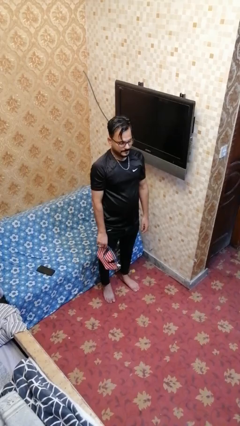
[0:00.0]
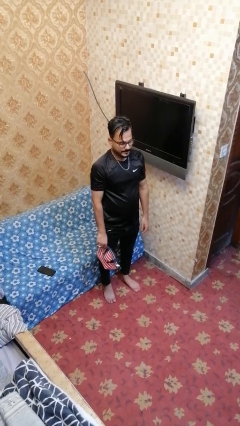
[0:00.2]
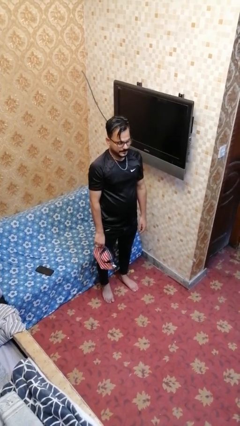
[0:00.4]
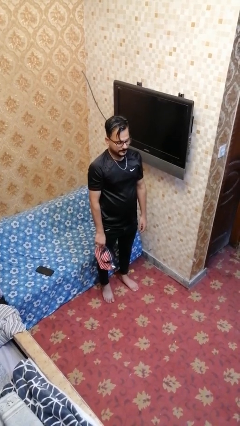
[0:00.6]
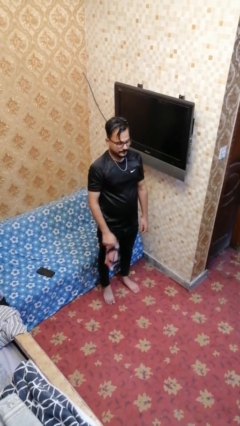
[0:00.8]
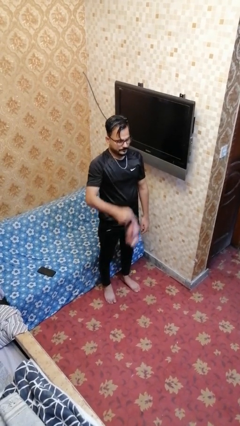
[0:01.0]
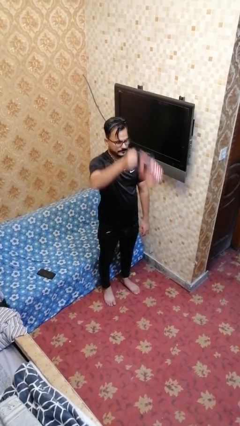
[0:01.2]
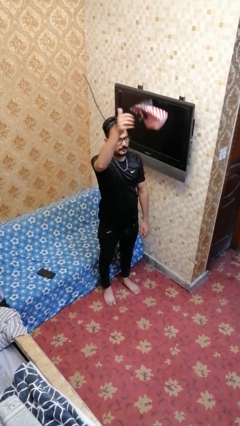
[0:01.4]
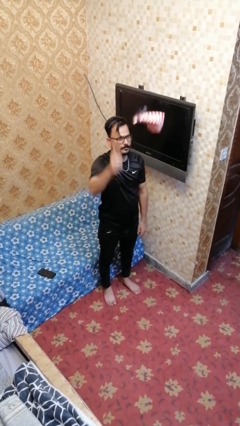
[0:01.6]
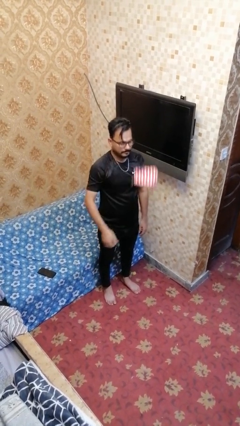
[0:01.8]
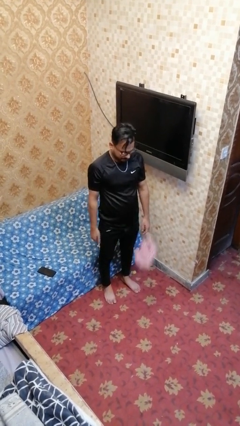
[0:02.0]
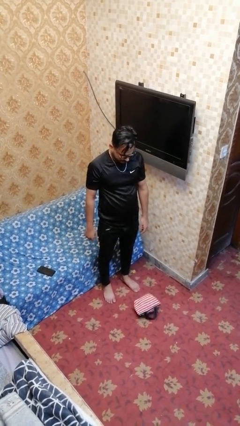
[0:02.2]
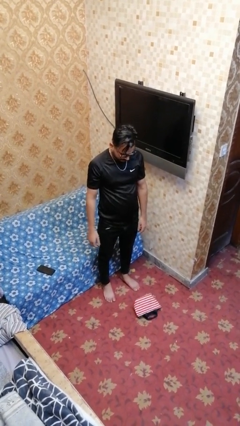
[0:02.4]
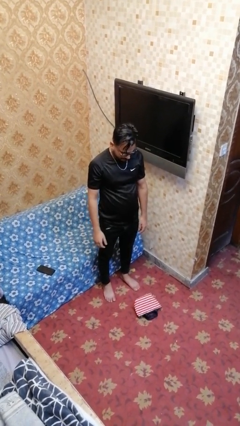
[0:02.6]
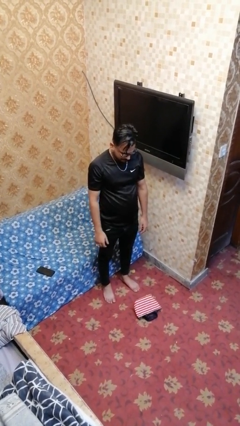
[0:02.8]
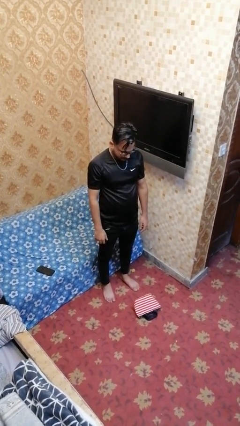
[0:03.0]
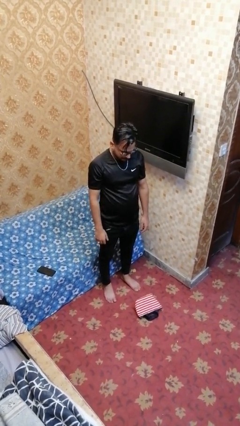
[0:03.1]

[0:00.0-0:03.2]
person throws object into air

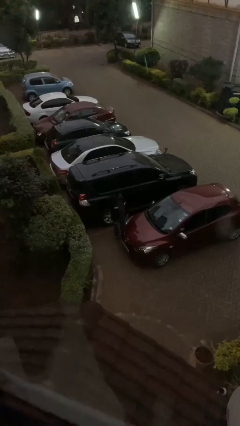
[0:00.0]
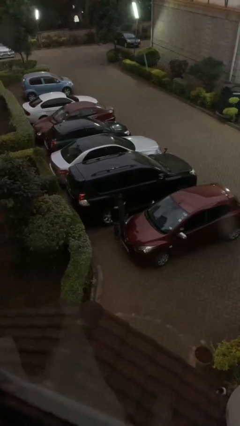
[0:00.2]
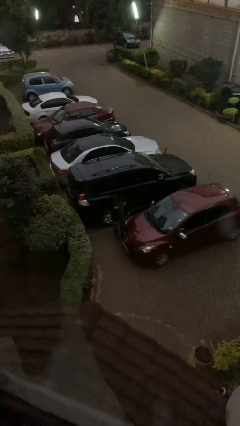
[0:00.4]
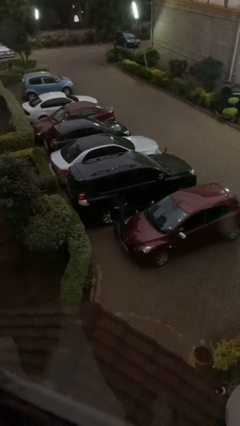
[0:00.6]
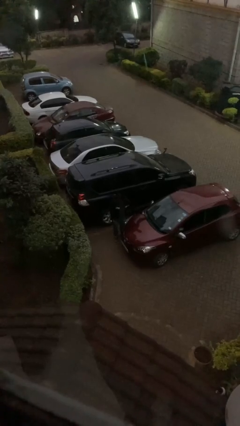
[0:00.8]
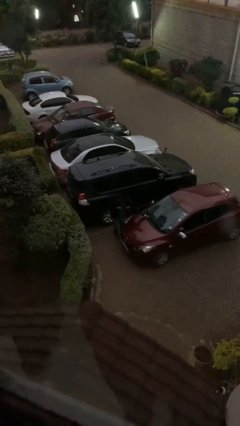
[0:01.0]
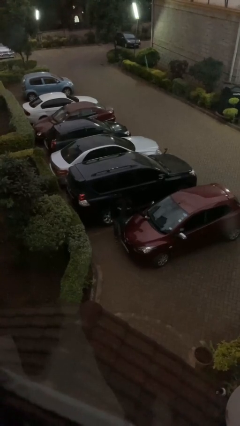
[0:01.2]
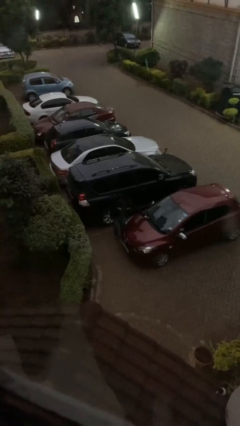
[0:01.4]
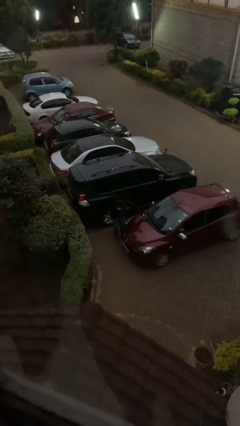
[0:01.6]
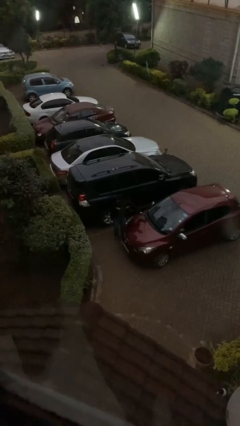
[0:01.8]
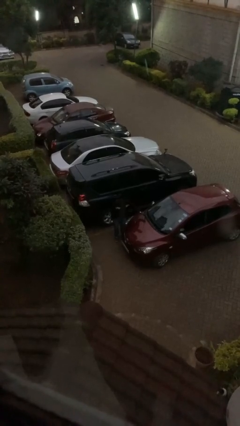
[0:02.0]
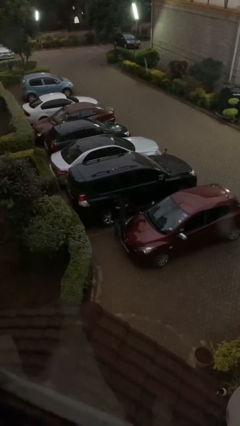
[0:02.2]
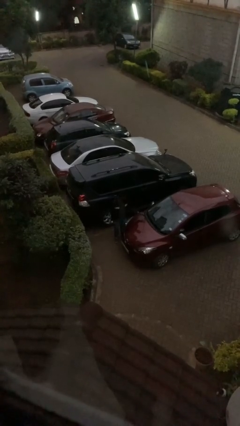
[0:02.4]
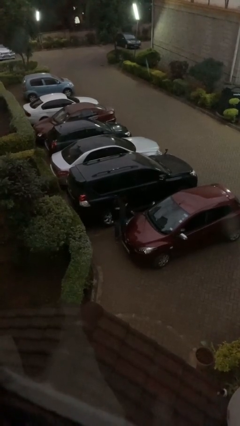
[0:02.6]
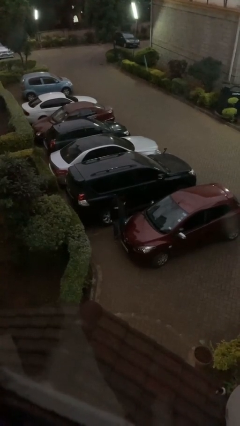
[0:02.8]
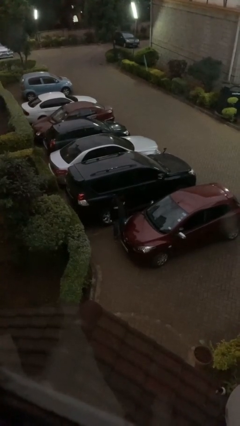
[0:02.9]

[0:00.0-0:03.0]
person flips up car wipers

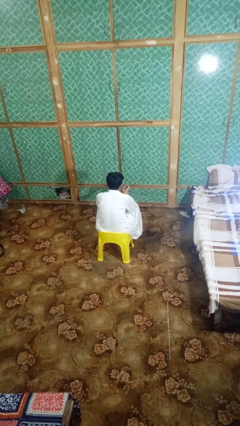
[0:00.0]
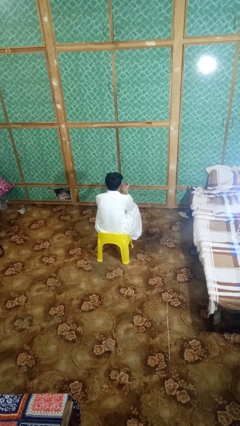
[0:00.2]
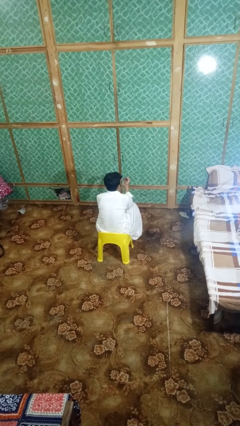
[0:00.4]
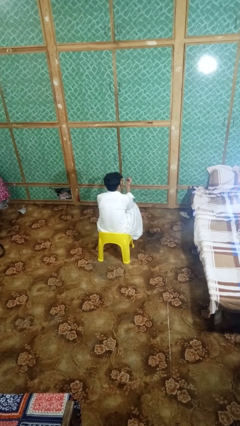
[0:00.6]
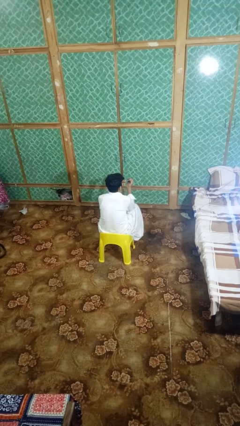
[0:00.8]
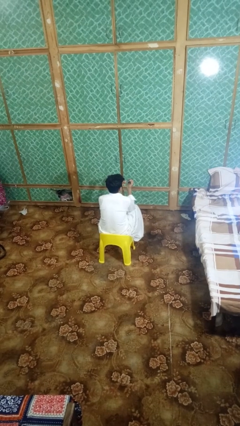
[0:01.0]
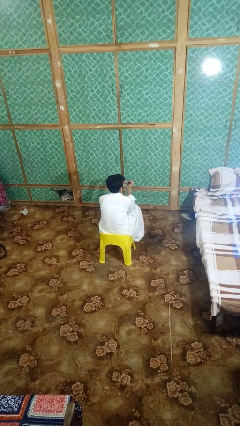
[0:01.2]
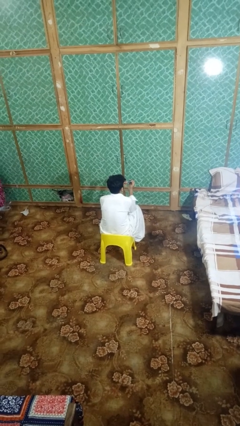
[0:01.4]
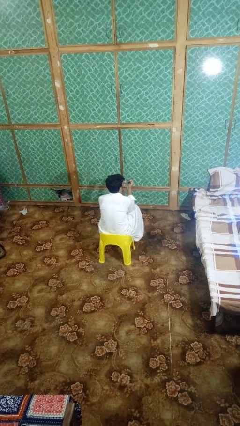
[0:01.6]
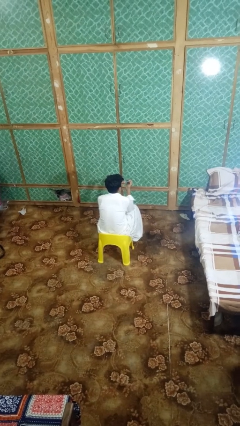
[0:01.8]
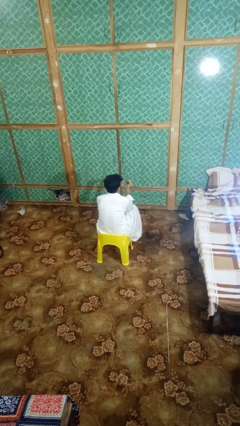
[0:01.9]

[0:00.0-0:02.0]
person files fingernails

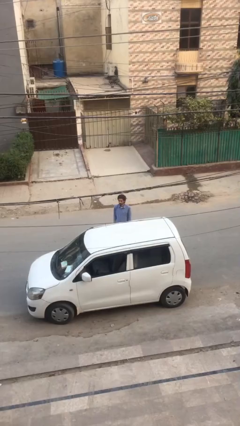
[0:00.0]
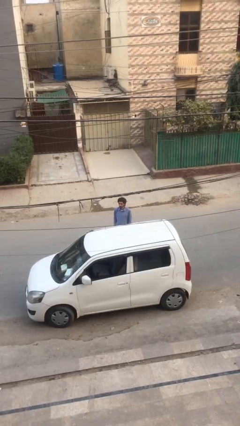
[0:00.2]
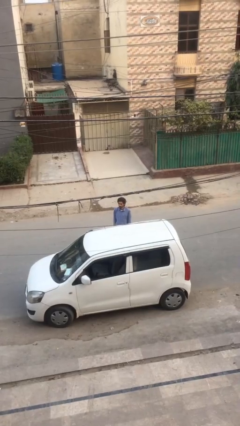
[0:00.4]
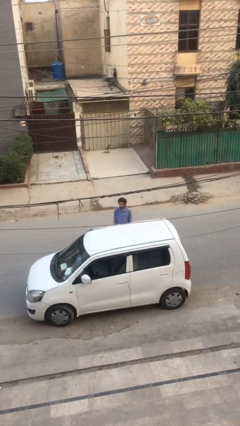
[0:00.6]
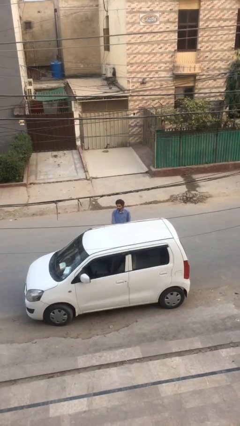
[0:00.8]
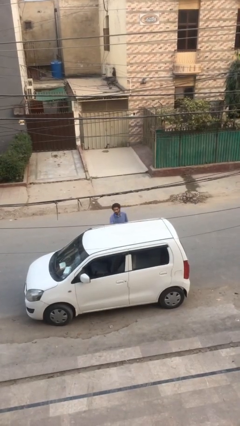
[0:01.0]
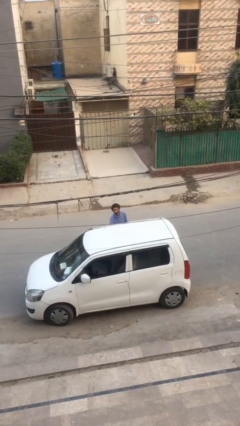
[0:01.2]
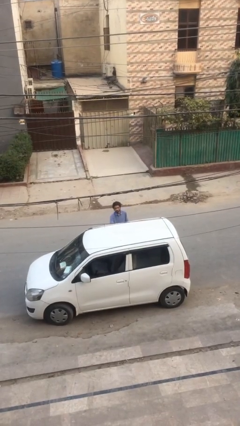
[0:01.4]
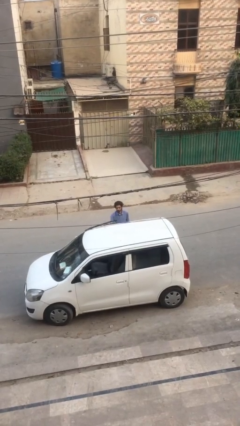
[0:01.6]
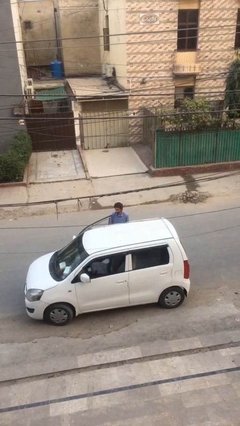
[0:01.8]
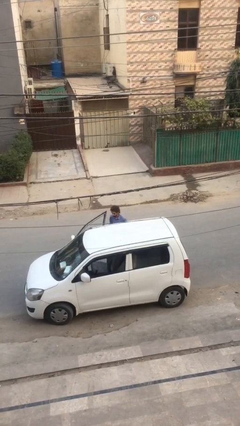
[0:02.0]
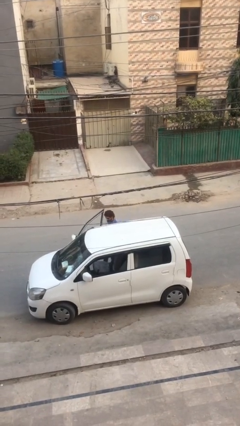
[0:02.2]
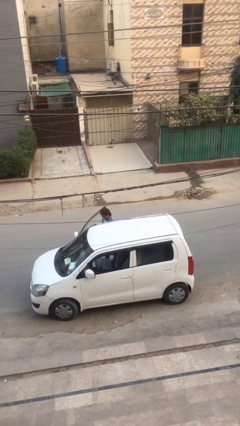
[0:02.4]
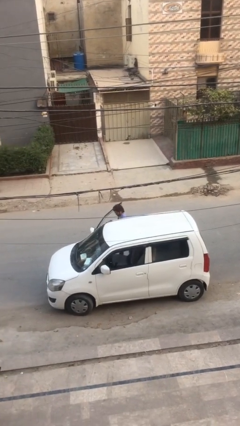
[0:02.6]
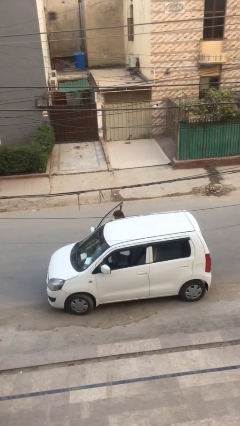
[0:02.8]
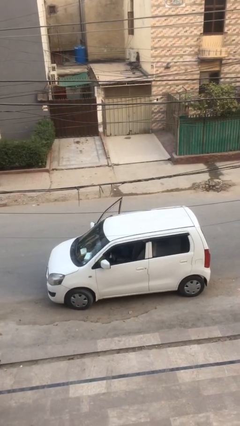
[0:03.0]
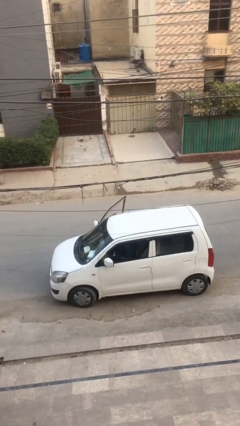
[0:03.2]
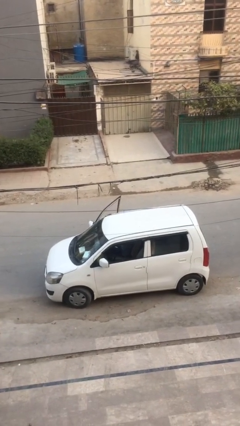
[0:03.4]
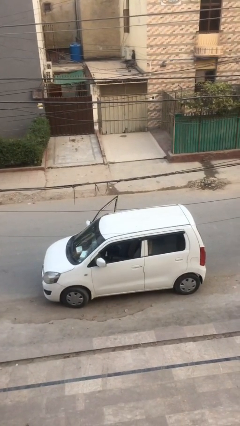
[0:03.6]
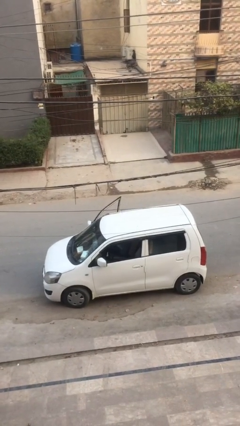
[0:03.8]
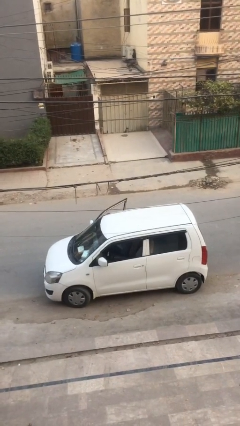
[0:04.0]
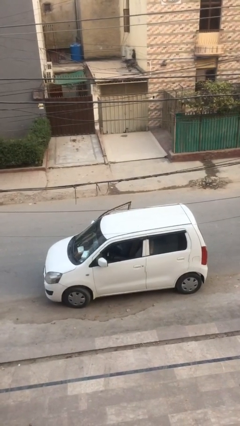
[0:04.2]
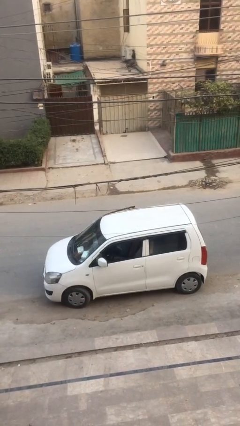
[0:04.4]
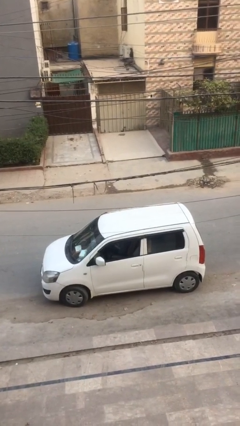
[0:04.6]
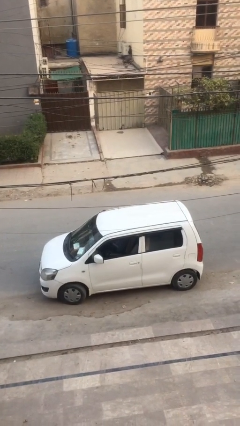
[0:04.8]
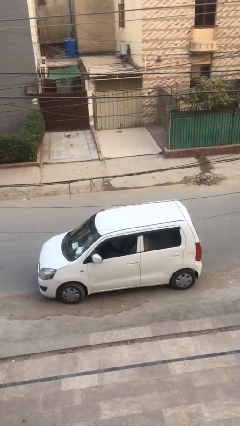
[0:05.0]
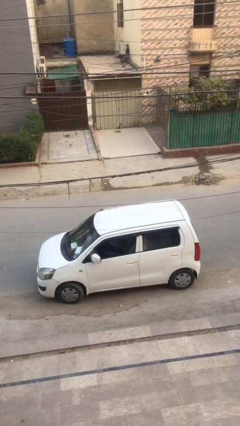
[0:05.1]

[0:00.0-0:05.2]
person enters car

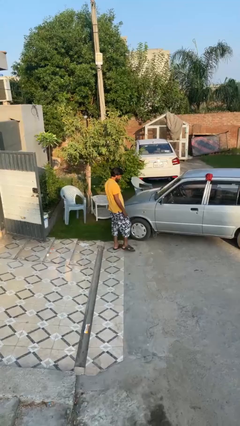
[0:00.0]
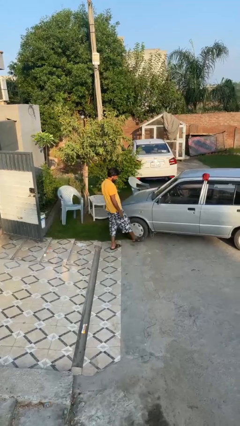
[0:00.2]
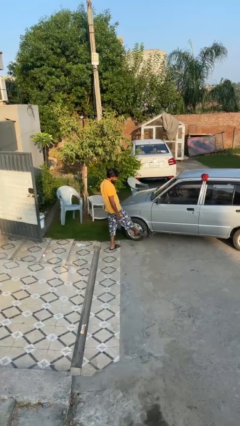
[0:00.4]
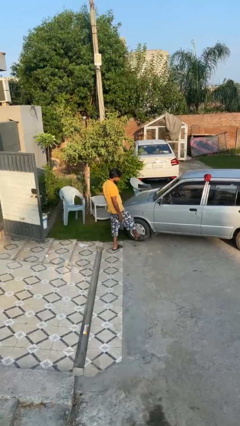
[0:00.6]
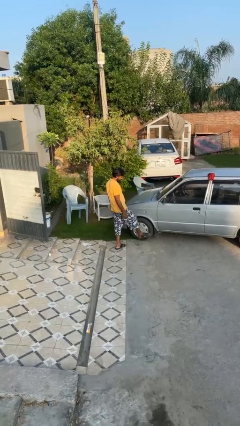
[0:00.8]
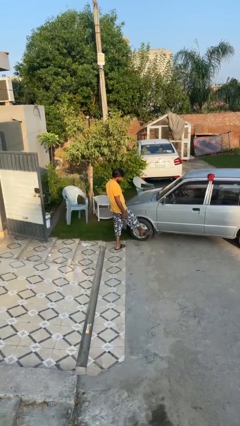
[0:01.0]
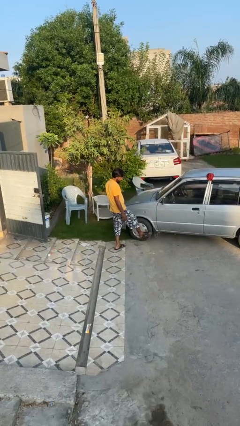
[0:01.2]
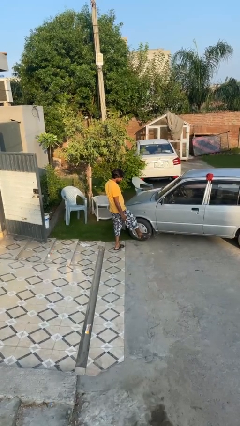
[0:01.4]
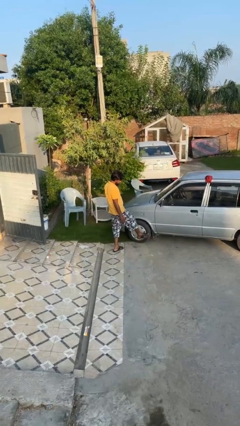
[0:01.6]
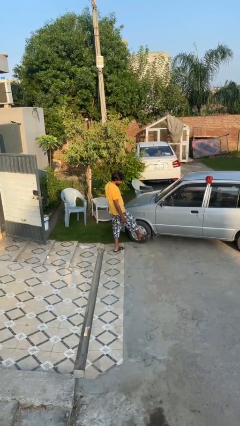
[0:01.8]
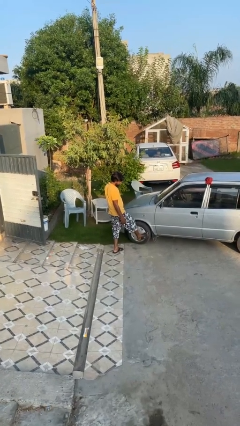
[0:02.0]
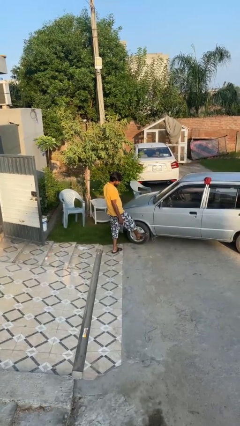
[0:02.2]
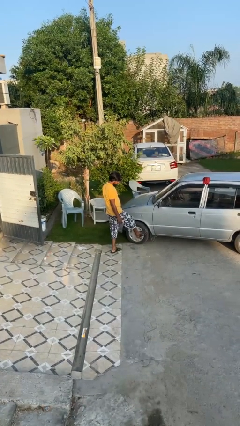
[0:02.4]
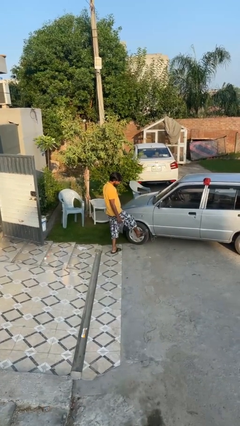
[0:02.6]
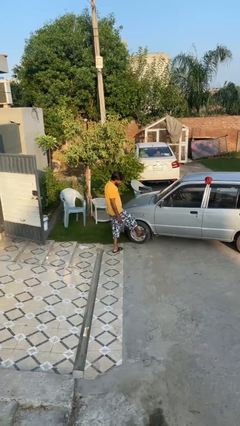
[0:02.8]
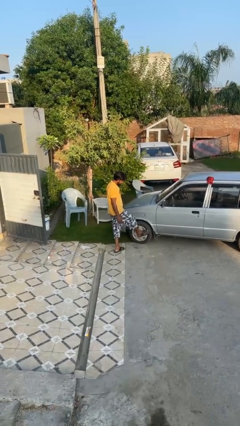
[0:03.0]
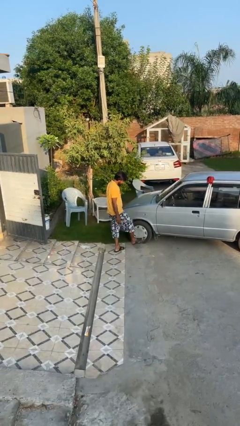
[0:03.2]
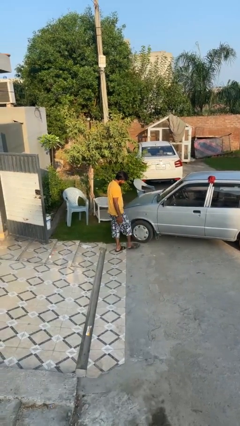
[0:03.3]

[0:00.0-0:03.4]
person kicks car tires

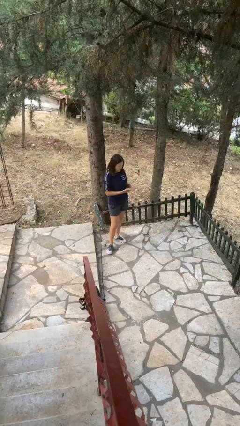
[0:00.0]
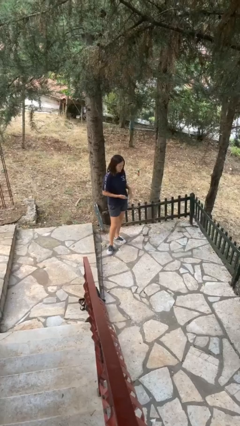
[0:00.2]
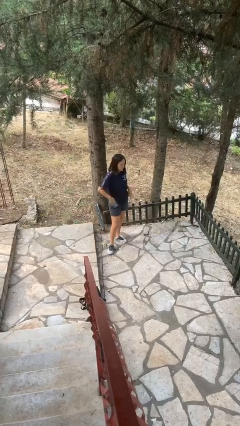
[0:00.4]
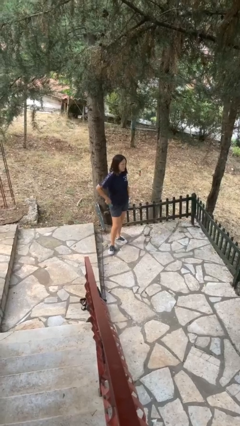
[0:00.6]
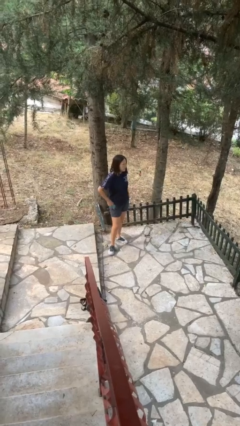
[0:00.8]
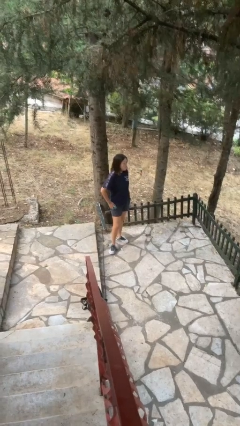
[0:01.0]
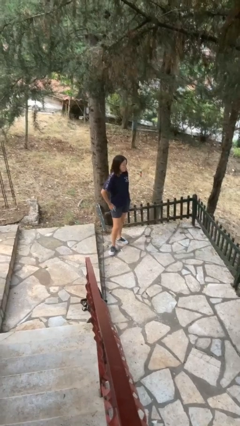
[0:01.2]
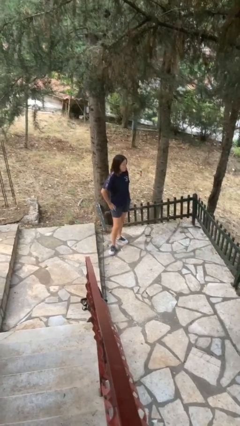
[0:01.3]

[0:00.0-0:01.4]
person puts phone into pocket
